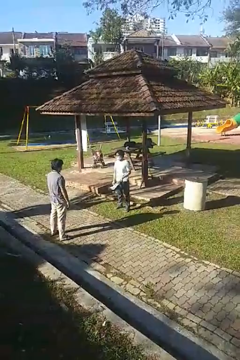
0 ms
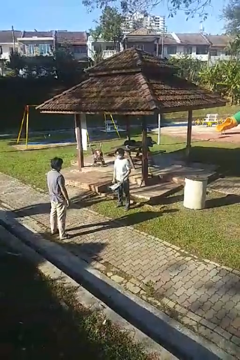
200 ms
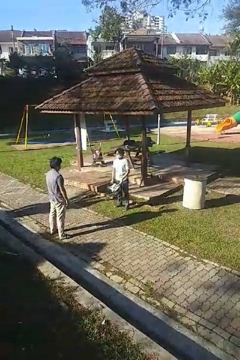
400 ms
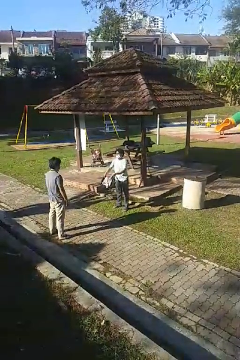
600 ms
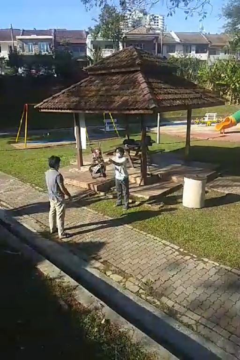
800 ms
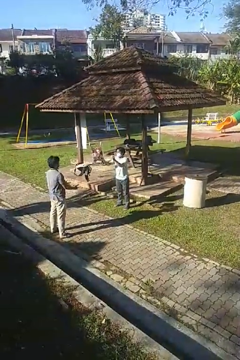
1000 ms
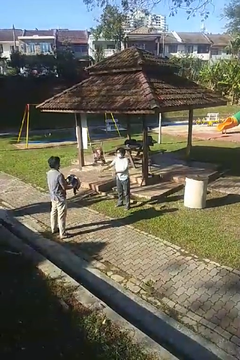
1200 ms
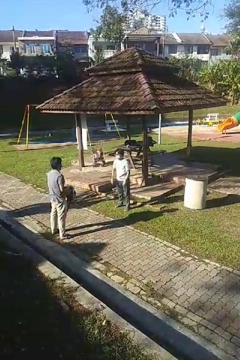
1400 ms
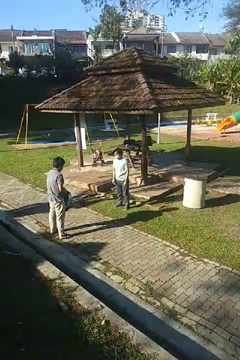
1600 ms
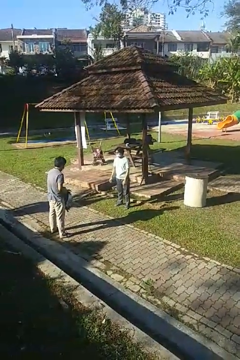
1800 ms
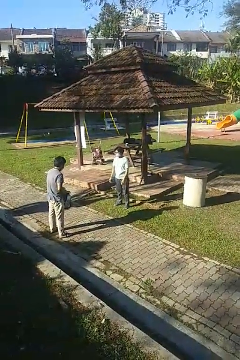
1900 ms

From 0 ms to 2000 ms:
person throws object to person

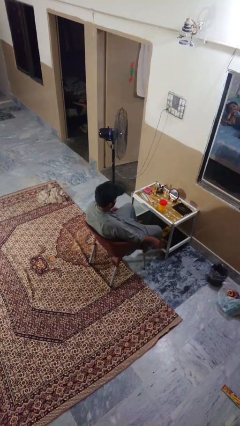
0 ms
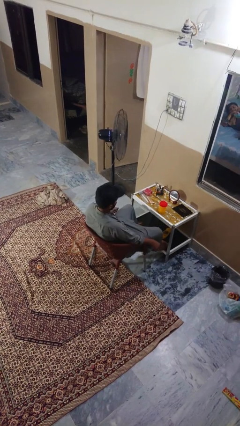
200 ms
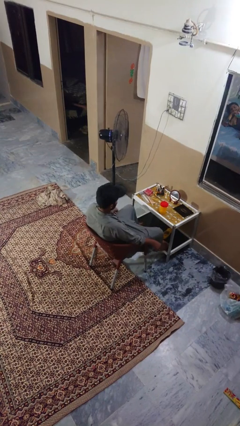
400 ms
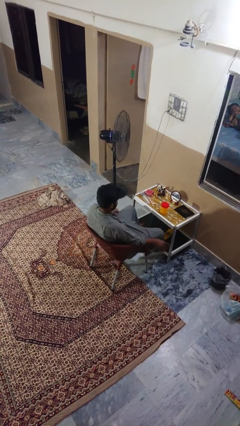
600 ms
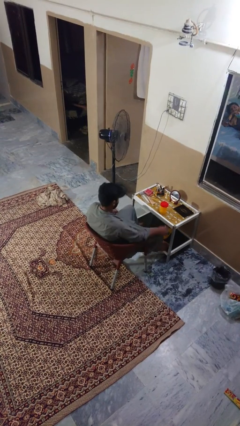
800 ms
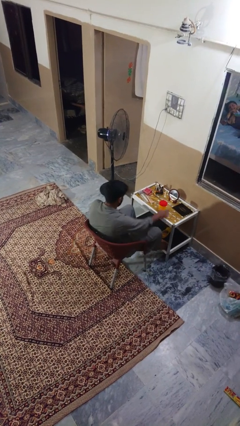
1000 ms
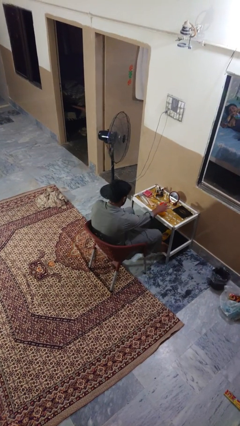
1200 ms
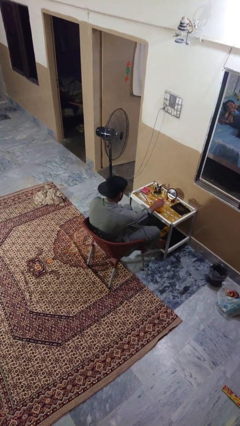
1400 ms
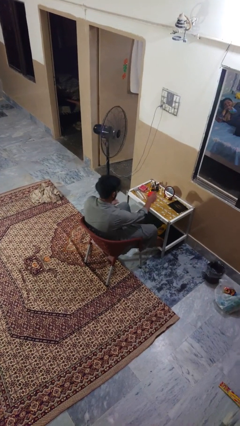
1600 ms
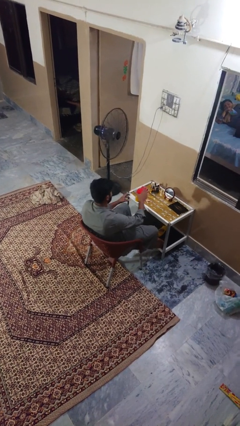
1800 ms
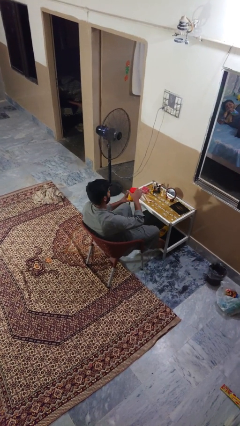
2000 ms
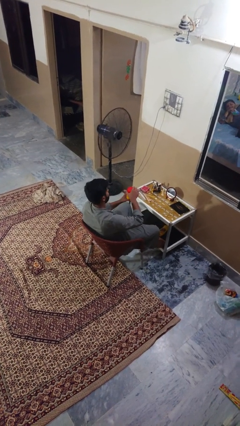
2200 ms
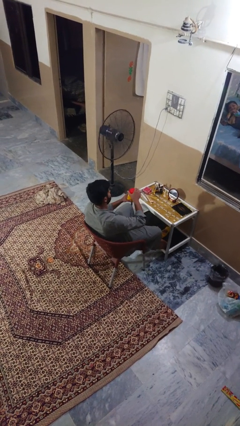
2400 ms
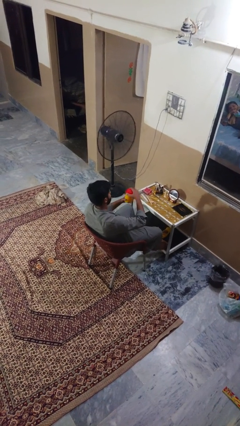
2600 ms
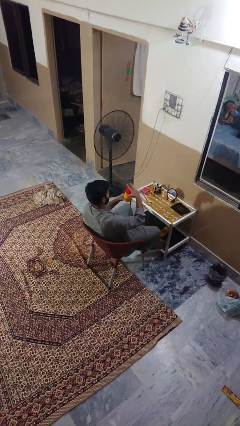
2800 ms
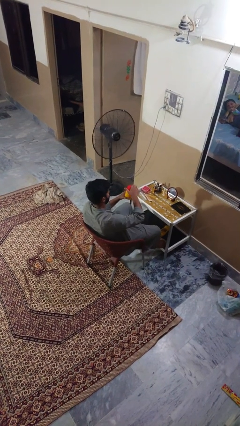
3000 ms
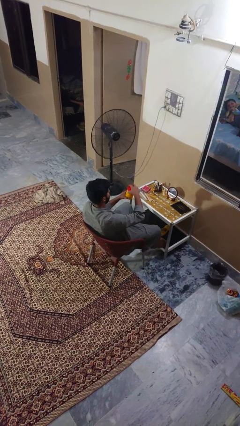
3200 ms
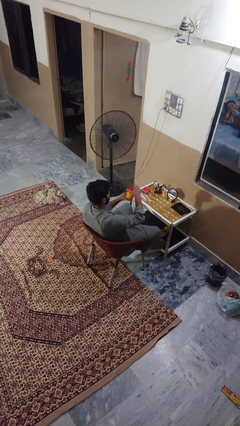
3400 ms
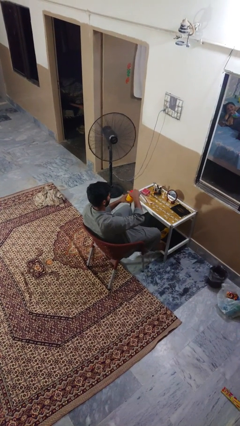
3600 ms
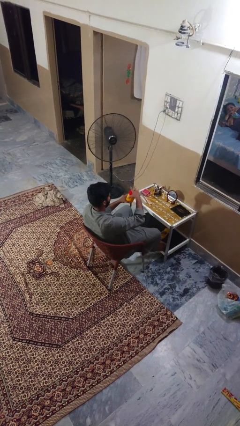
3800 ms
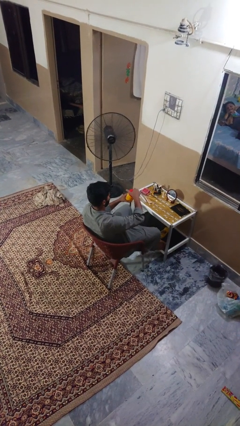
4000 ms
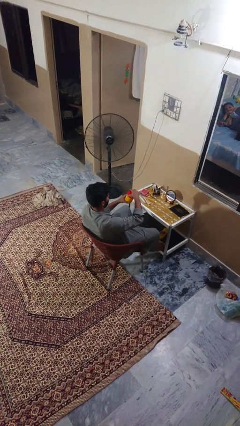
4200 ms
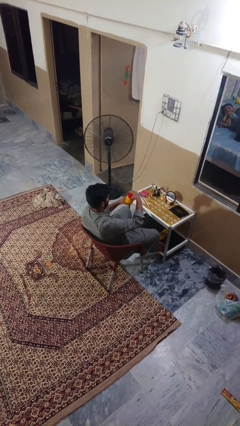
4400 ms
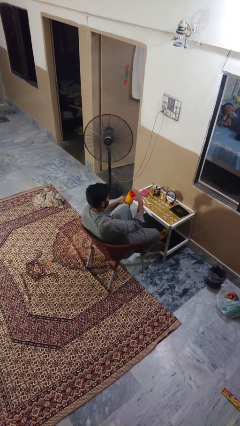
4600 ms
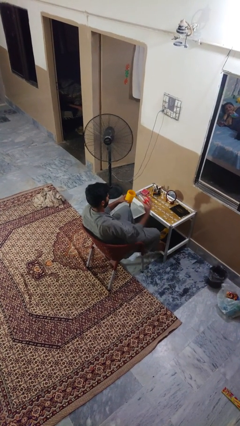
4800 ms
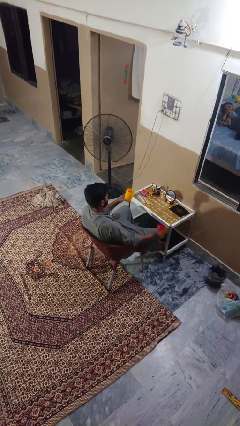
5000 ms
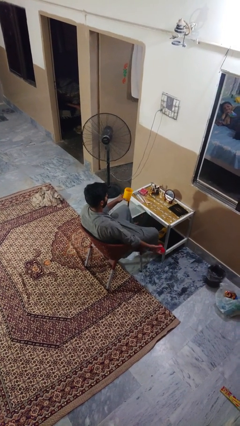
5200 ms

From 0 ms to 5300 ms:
person opens jar

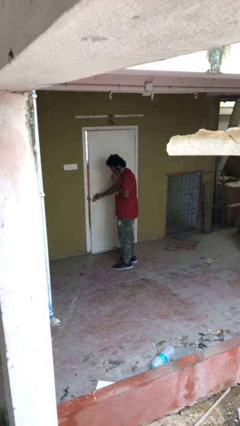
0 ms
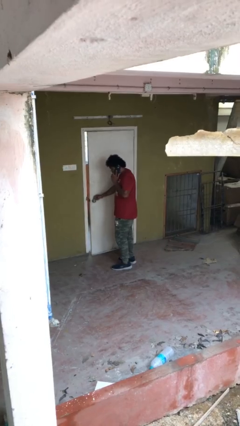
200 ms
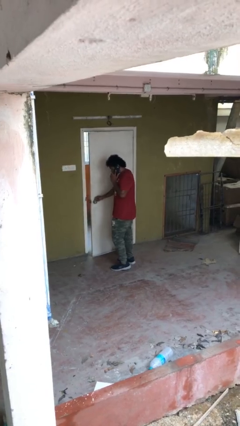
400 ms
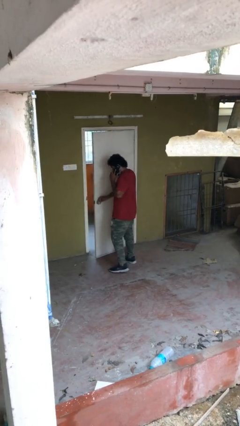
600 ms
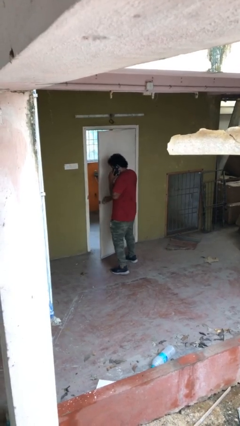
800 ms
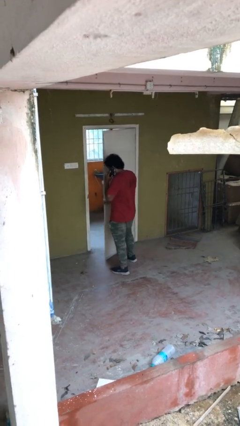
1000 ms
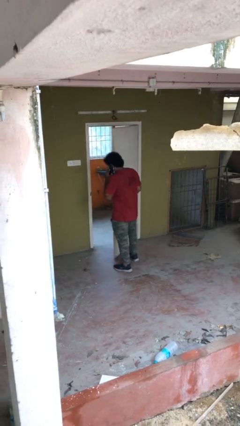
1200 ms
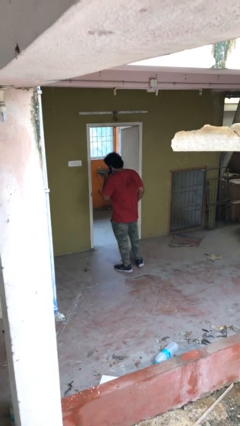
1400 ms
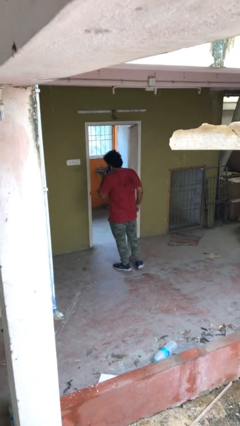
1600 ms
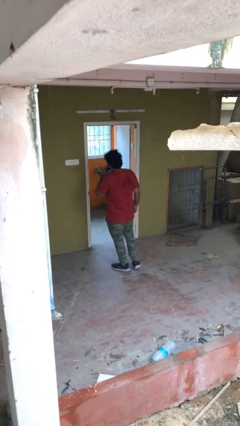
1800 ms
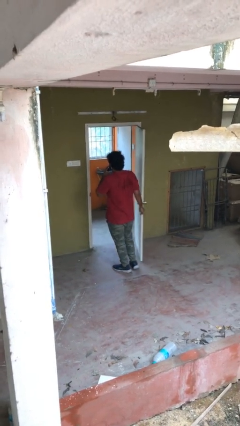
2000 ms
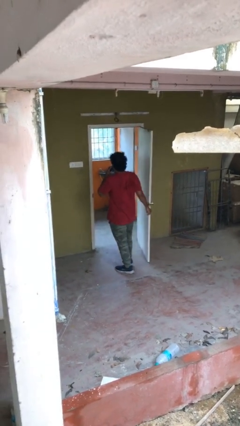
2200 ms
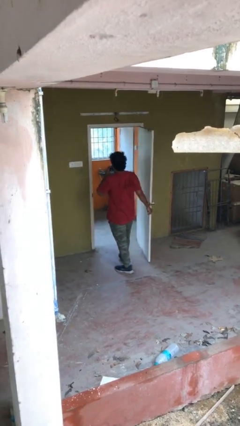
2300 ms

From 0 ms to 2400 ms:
person opens facility door

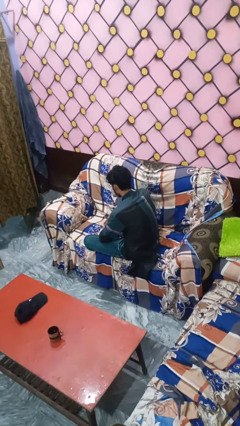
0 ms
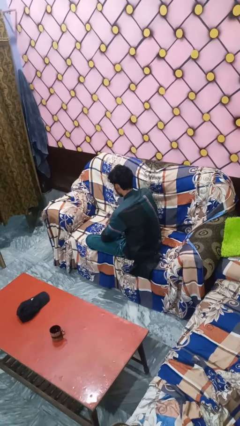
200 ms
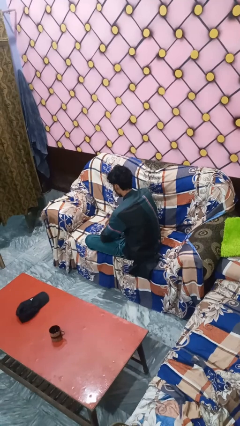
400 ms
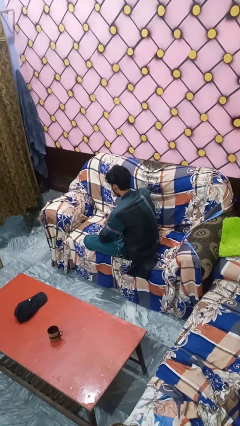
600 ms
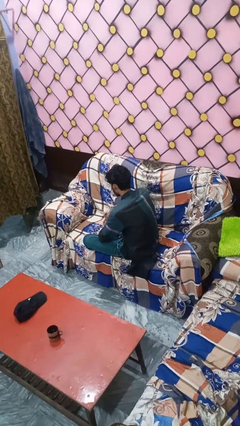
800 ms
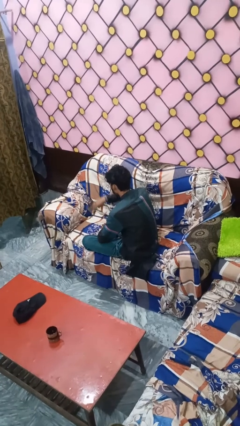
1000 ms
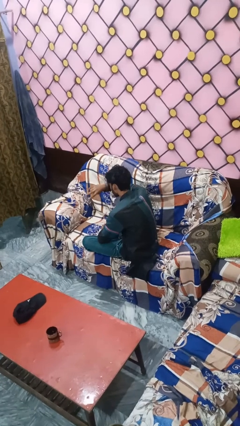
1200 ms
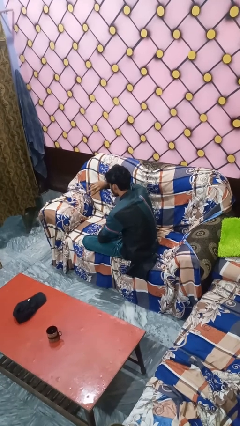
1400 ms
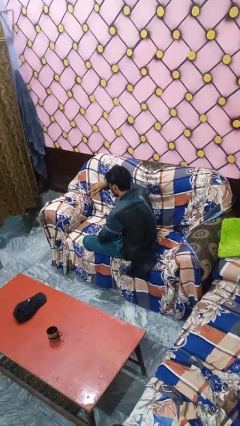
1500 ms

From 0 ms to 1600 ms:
person gestures watch closely

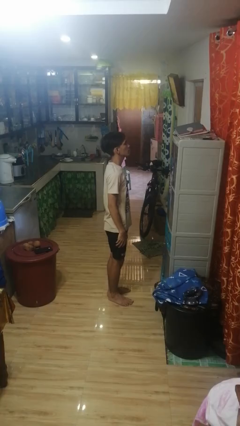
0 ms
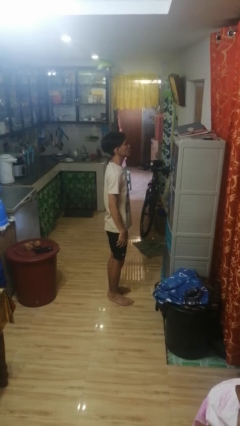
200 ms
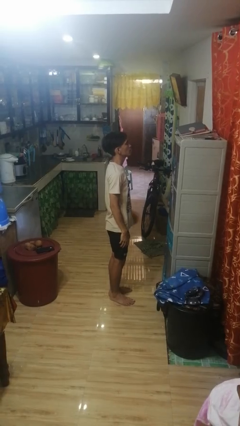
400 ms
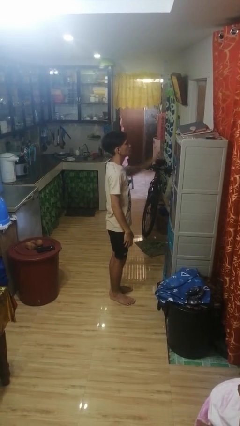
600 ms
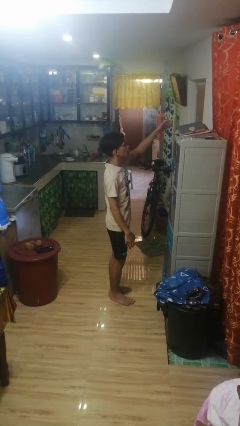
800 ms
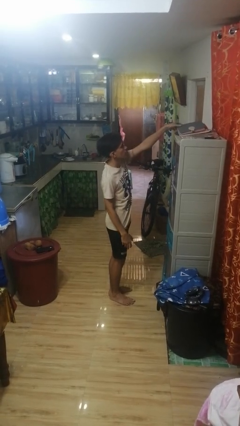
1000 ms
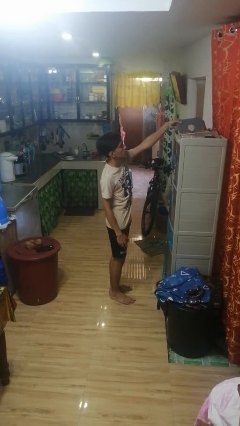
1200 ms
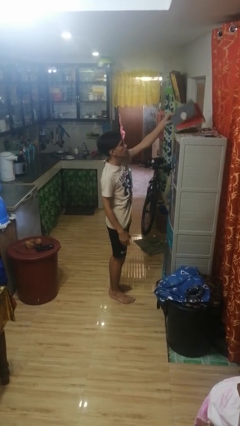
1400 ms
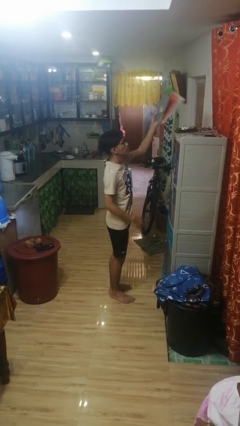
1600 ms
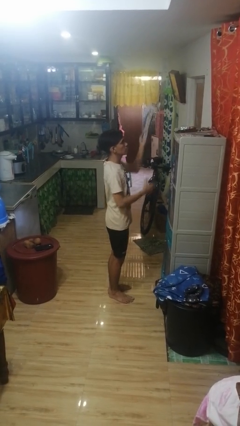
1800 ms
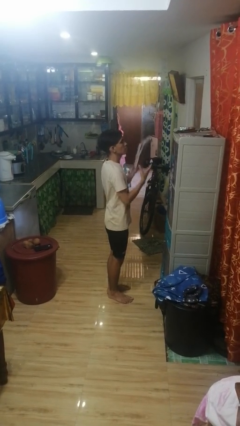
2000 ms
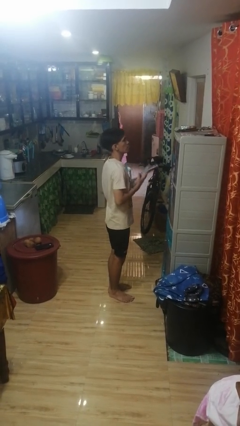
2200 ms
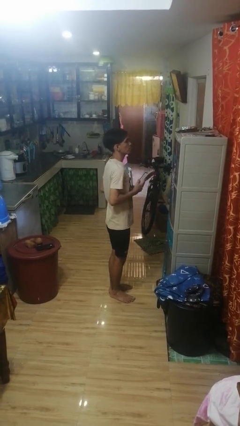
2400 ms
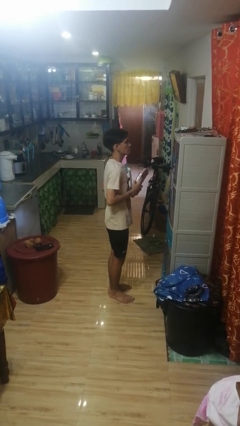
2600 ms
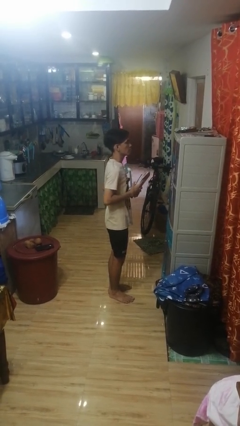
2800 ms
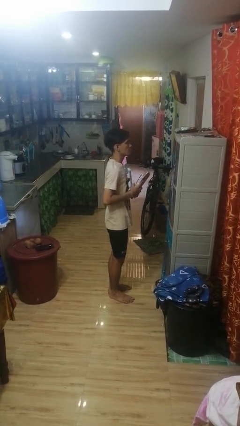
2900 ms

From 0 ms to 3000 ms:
person picks up object from shelf

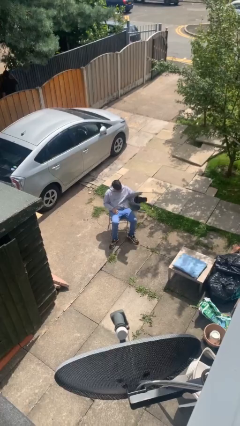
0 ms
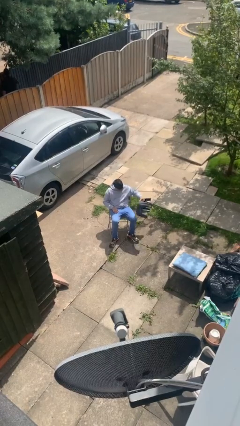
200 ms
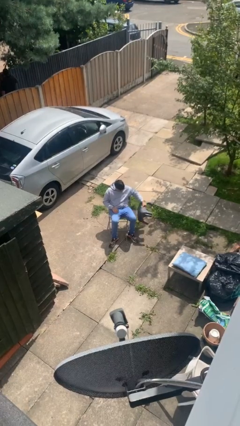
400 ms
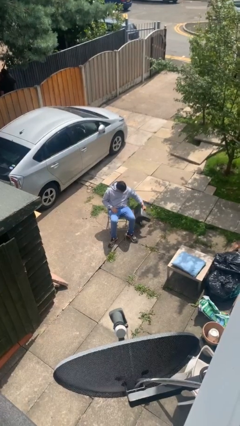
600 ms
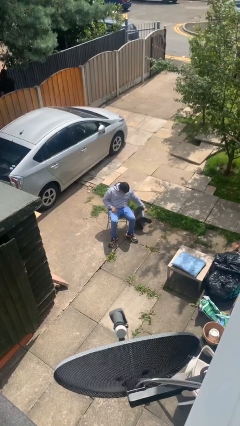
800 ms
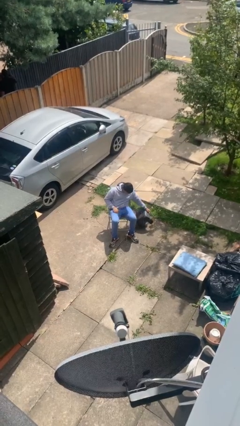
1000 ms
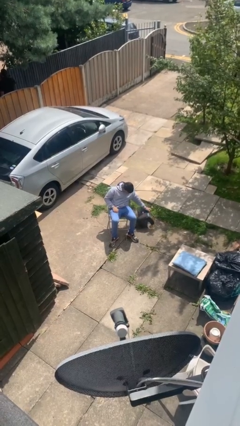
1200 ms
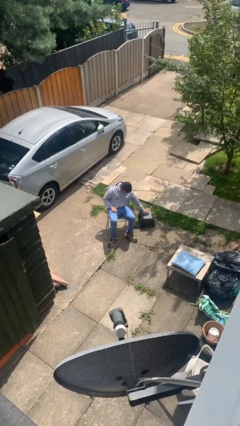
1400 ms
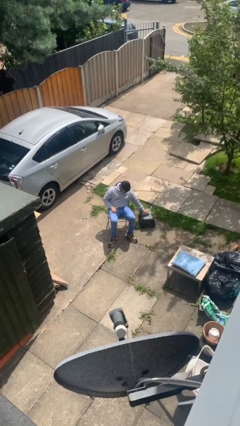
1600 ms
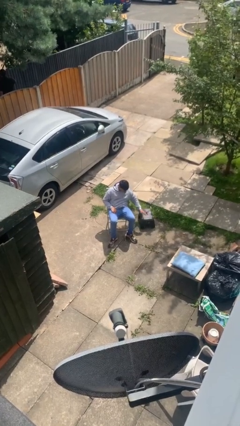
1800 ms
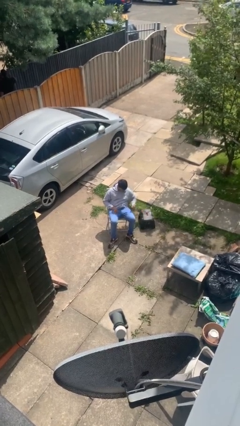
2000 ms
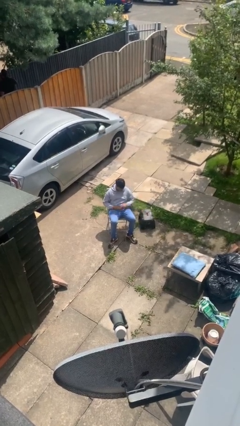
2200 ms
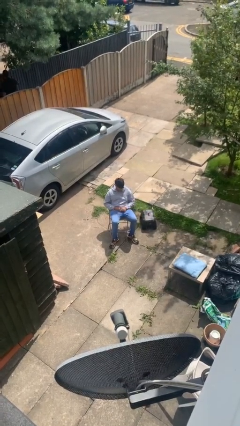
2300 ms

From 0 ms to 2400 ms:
person puts down object on floor

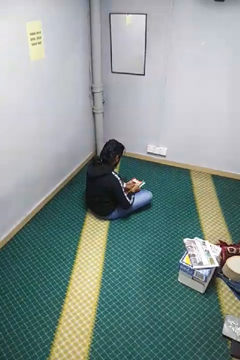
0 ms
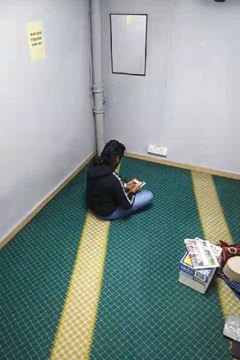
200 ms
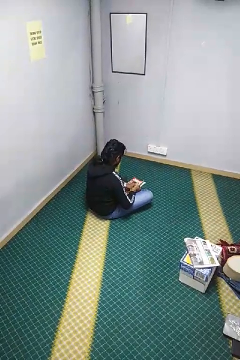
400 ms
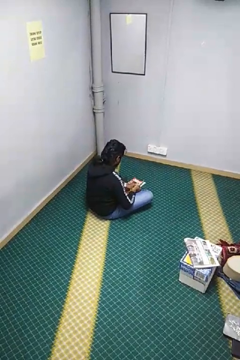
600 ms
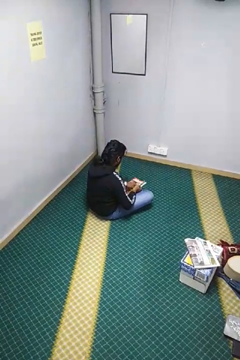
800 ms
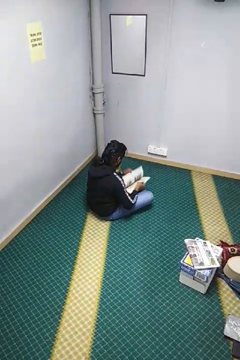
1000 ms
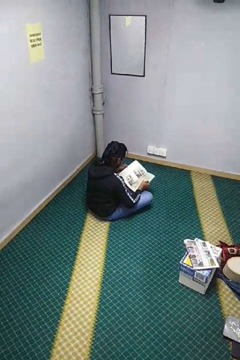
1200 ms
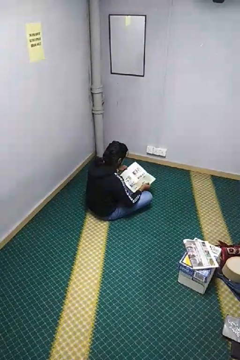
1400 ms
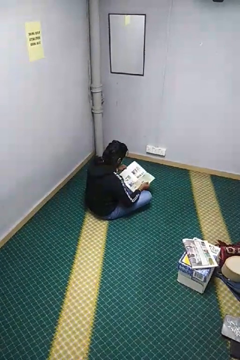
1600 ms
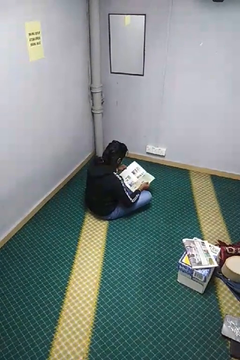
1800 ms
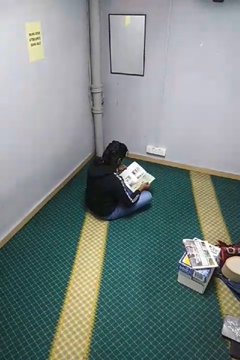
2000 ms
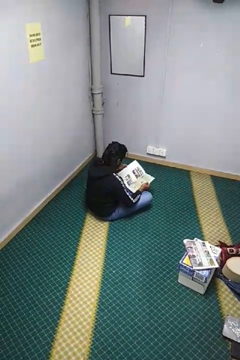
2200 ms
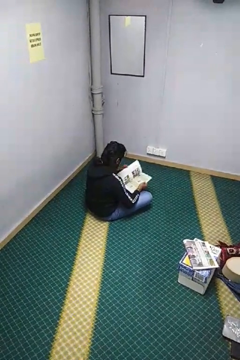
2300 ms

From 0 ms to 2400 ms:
person reads magazine
